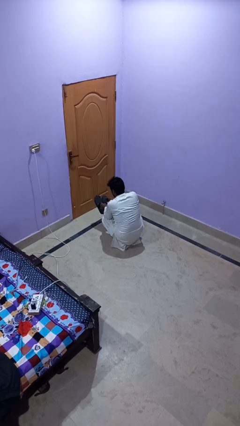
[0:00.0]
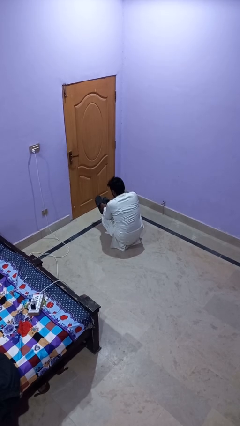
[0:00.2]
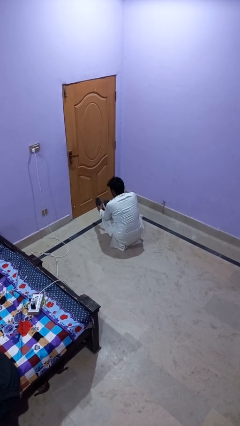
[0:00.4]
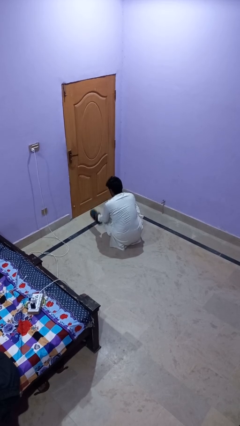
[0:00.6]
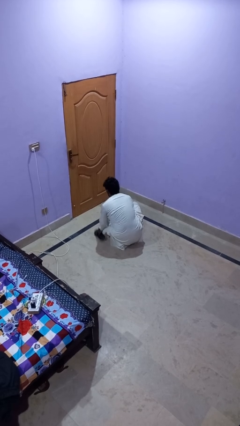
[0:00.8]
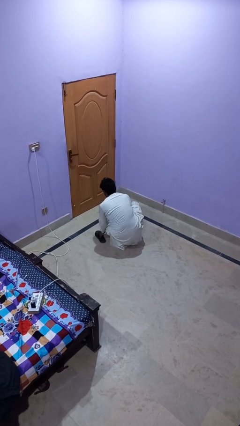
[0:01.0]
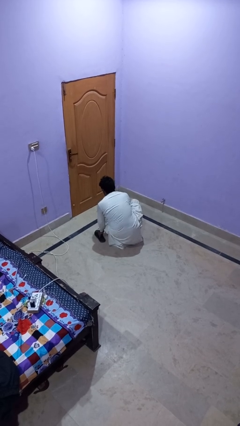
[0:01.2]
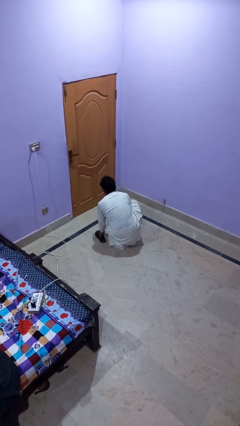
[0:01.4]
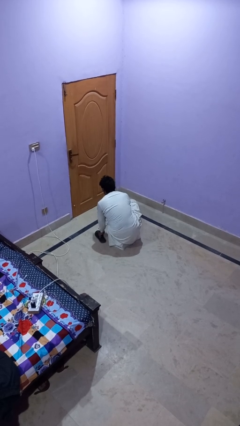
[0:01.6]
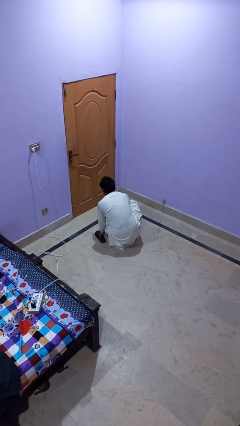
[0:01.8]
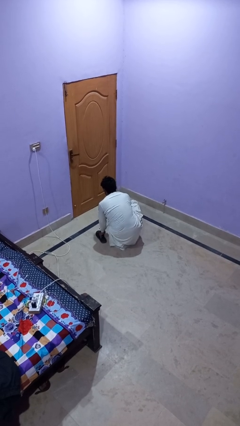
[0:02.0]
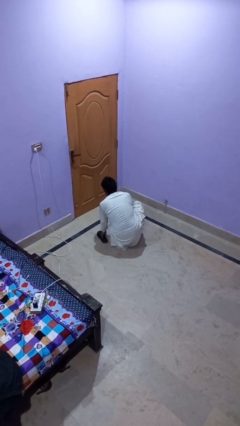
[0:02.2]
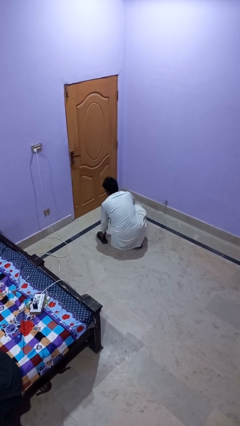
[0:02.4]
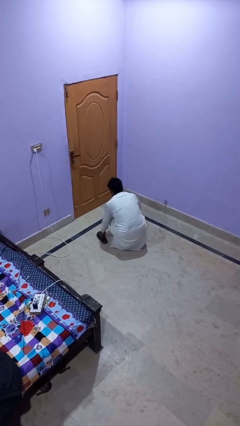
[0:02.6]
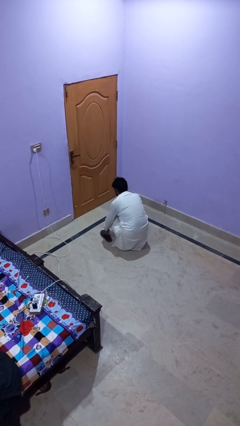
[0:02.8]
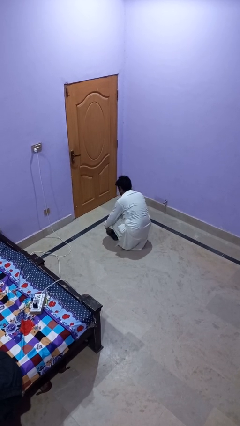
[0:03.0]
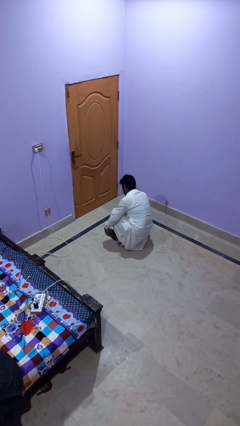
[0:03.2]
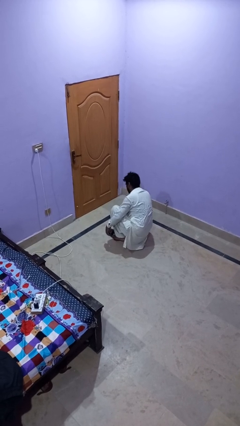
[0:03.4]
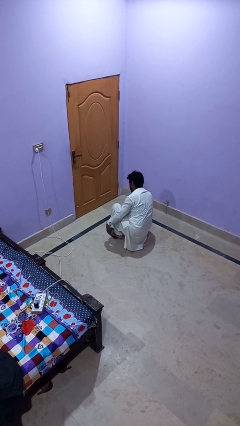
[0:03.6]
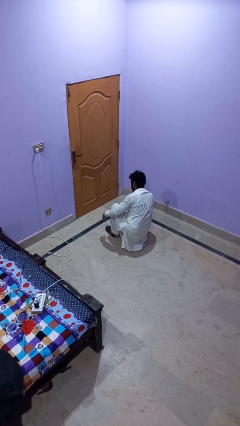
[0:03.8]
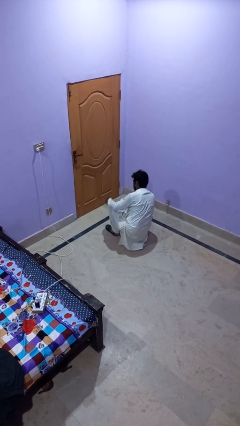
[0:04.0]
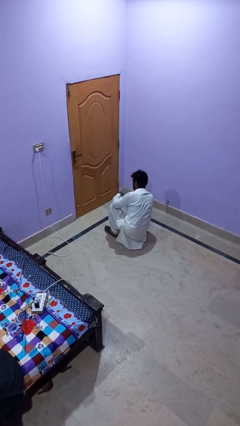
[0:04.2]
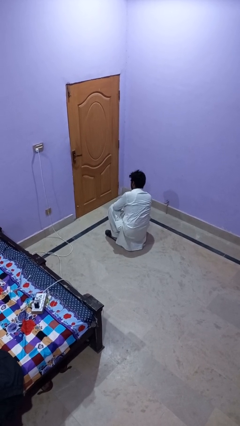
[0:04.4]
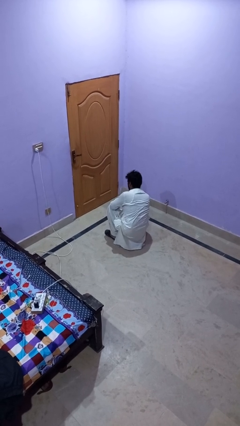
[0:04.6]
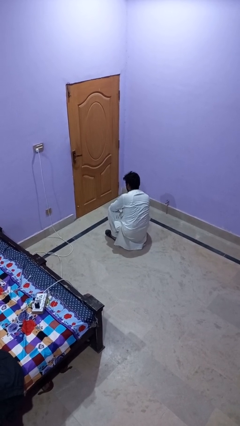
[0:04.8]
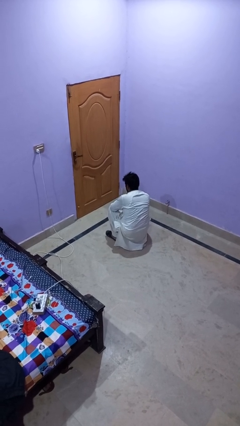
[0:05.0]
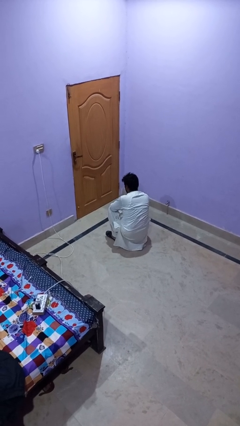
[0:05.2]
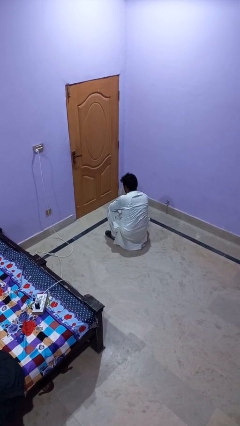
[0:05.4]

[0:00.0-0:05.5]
person puts on shoes

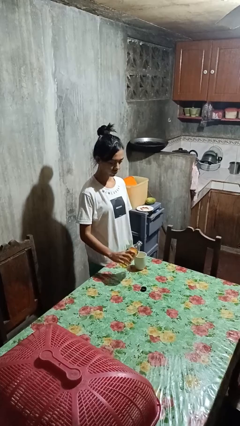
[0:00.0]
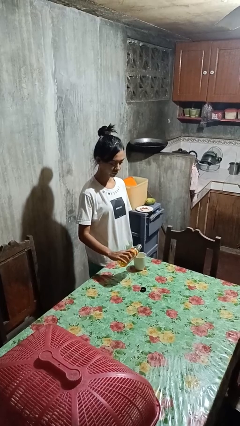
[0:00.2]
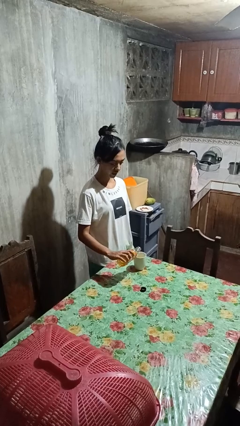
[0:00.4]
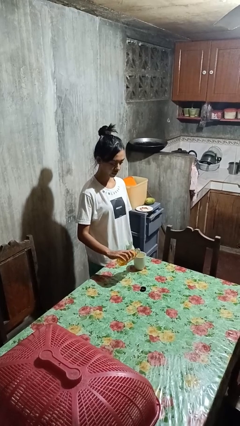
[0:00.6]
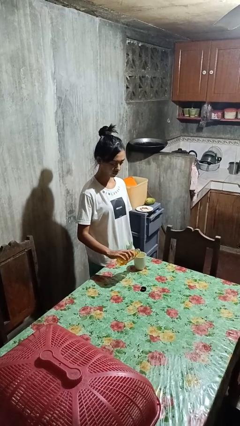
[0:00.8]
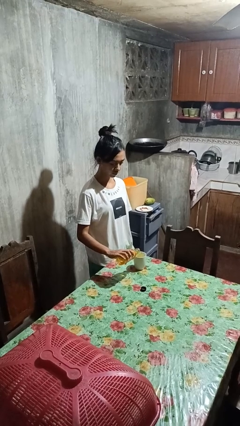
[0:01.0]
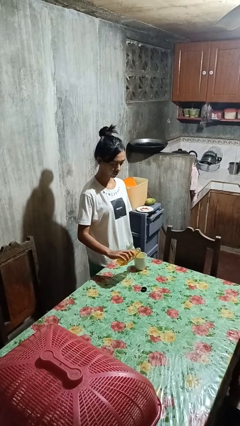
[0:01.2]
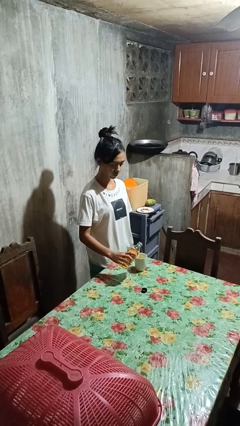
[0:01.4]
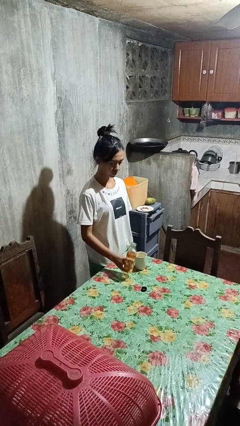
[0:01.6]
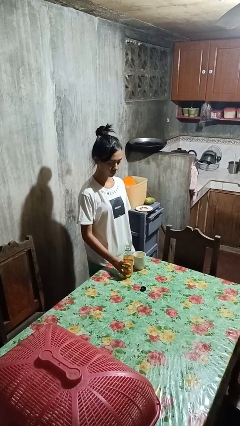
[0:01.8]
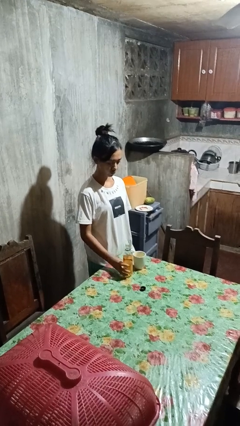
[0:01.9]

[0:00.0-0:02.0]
person pours liquid into cup

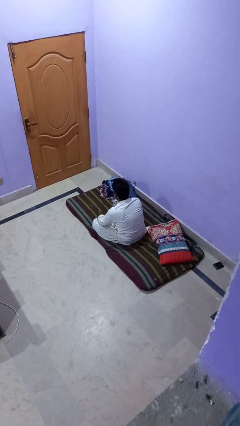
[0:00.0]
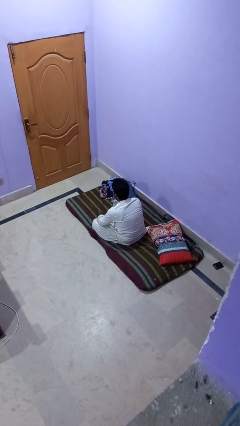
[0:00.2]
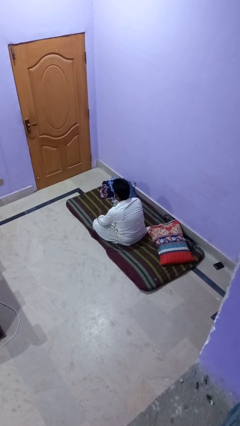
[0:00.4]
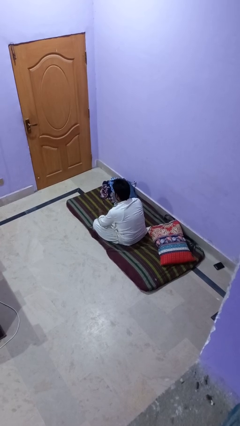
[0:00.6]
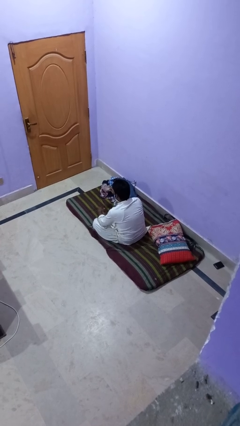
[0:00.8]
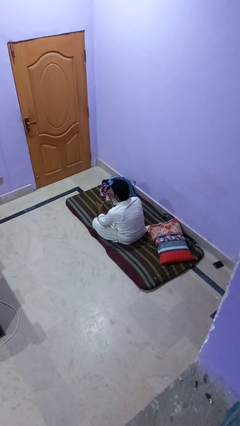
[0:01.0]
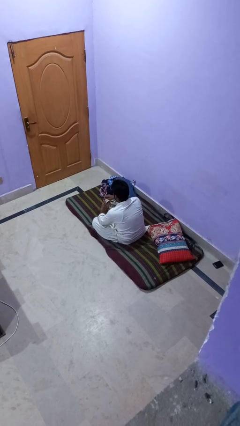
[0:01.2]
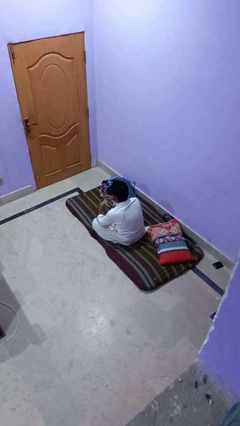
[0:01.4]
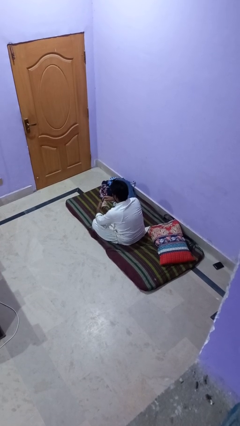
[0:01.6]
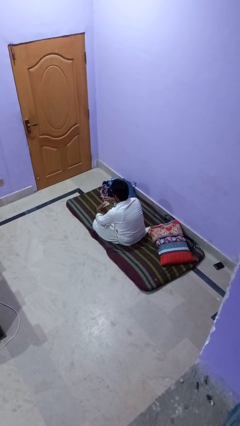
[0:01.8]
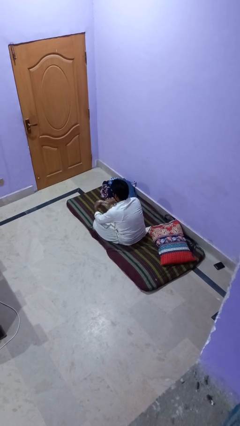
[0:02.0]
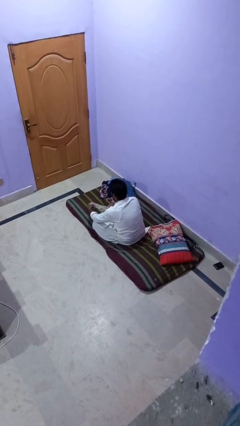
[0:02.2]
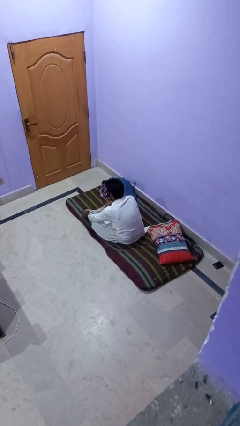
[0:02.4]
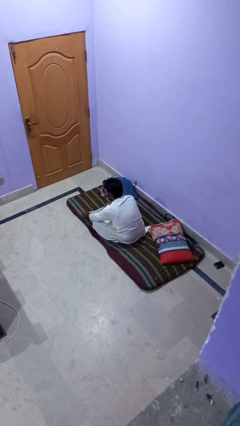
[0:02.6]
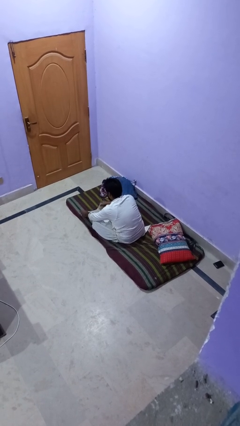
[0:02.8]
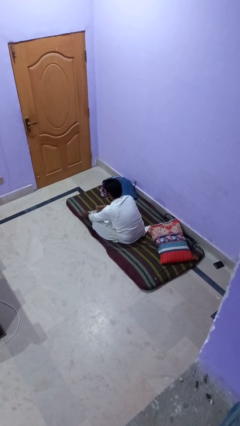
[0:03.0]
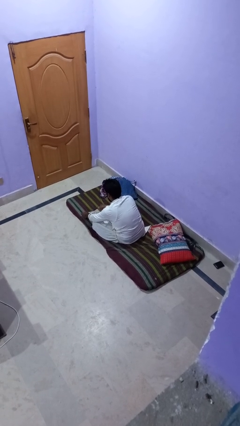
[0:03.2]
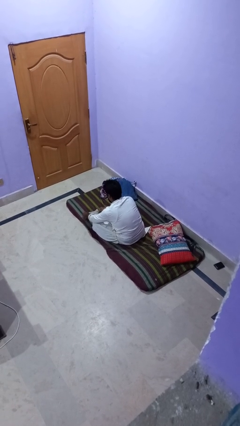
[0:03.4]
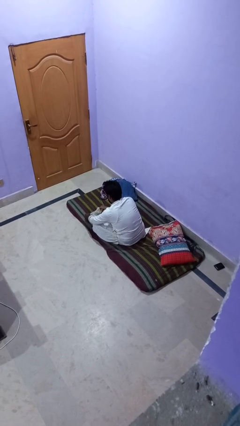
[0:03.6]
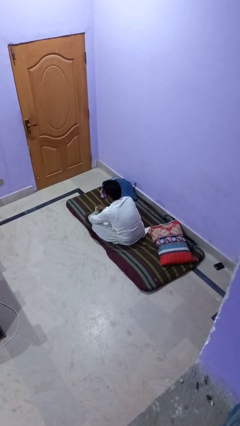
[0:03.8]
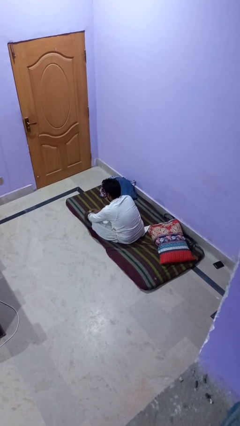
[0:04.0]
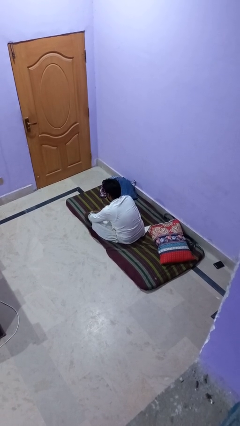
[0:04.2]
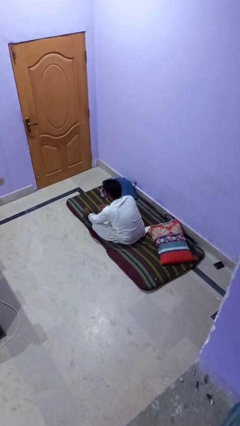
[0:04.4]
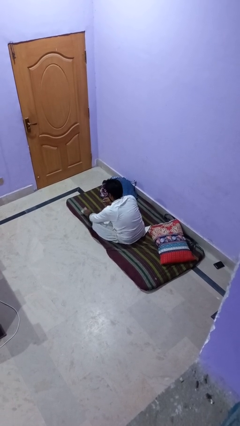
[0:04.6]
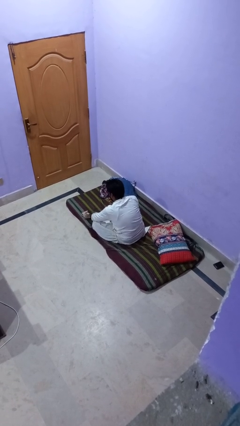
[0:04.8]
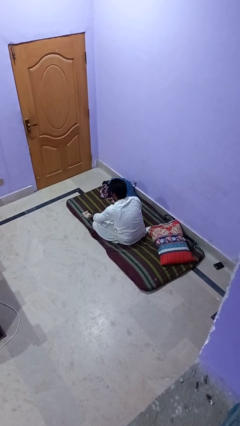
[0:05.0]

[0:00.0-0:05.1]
person folds socks

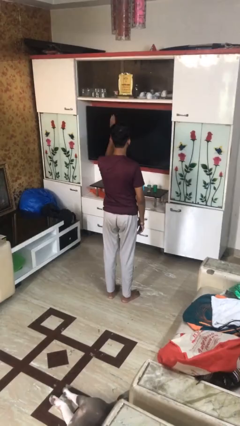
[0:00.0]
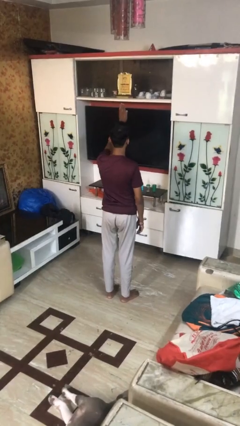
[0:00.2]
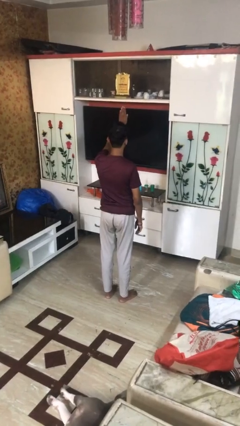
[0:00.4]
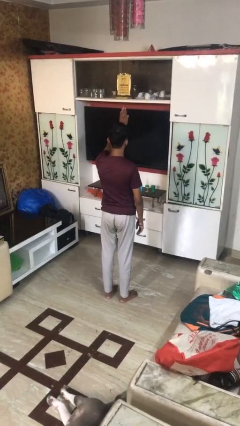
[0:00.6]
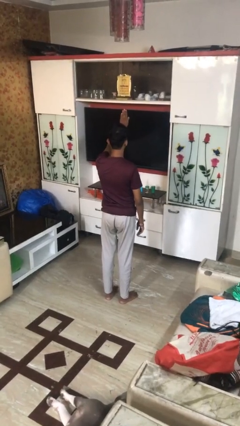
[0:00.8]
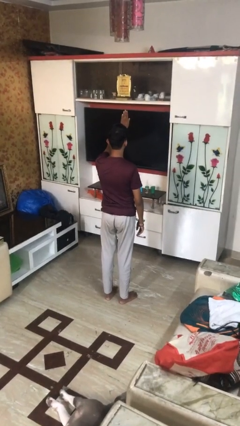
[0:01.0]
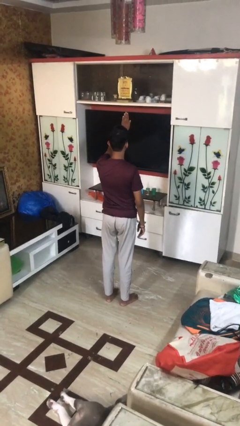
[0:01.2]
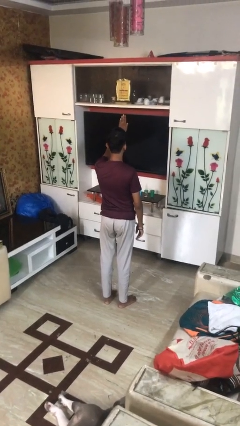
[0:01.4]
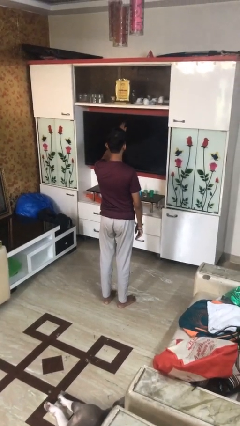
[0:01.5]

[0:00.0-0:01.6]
person gestures stop

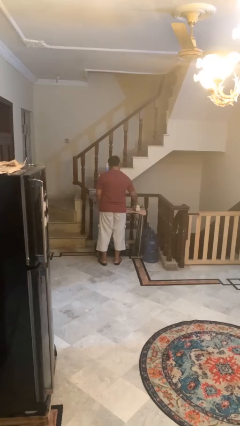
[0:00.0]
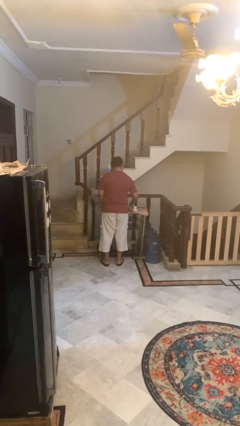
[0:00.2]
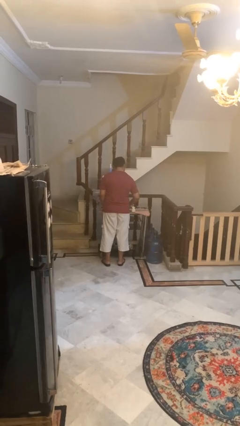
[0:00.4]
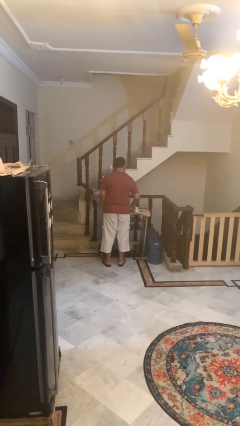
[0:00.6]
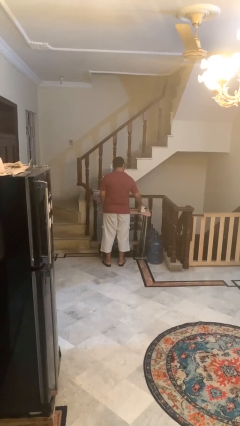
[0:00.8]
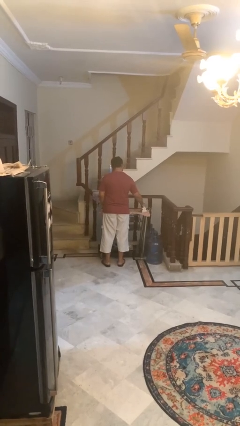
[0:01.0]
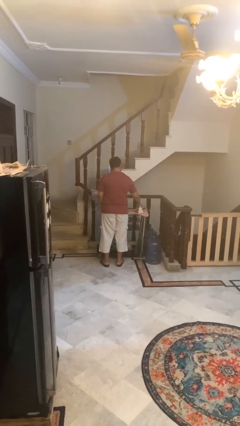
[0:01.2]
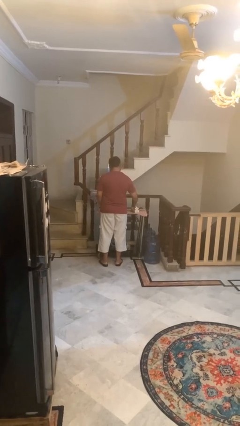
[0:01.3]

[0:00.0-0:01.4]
person irons clothes

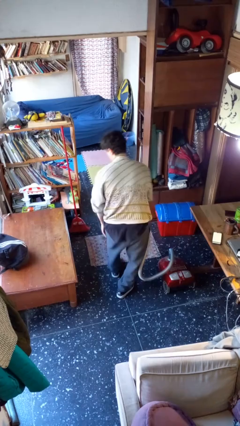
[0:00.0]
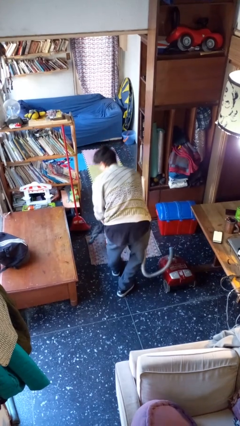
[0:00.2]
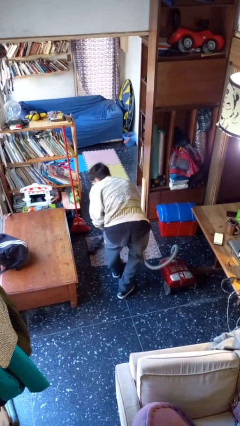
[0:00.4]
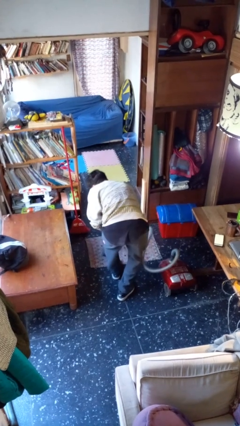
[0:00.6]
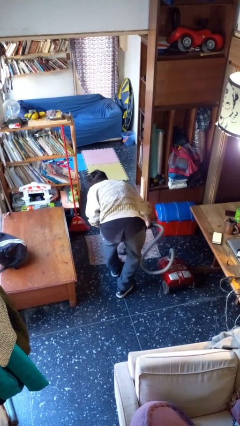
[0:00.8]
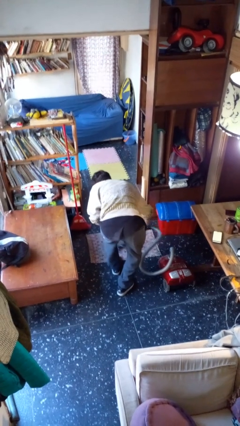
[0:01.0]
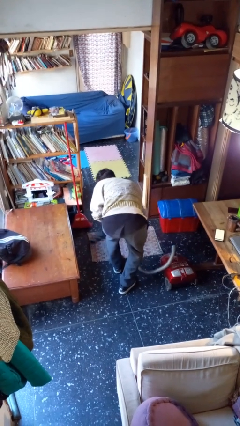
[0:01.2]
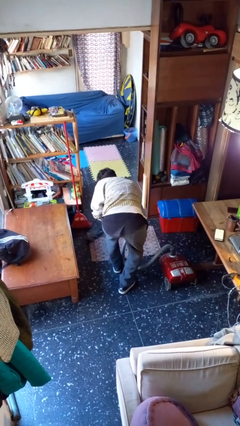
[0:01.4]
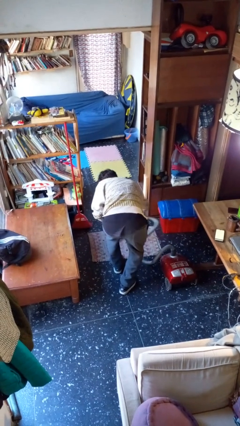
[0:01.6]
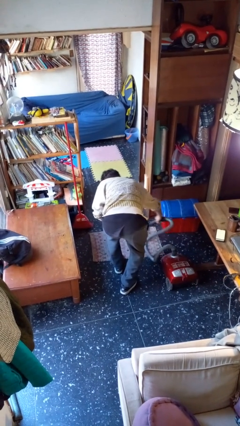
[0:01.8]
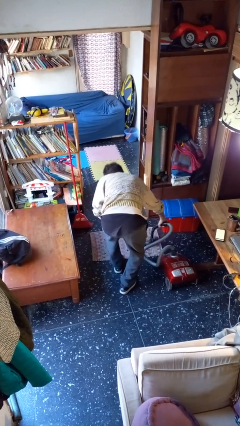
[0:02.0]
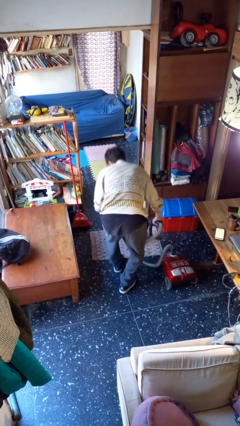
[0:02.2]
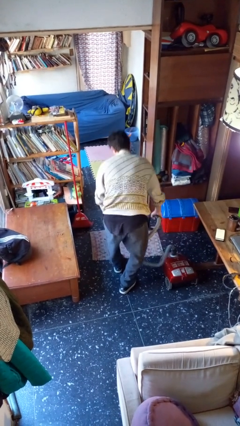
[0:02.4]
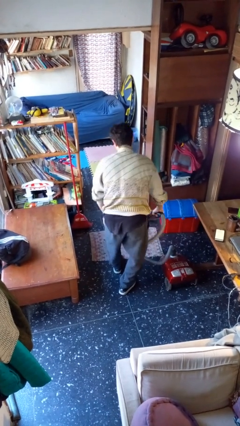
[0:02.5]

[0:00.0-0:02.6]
person vacuums carpet
